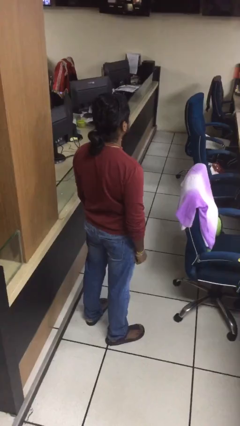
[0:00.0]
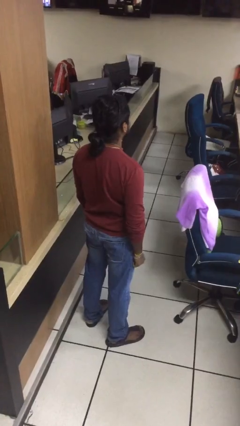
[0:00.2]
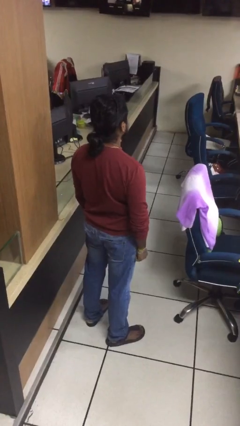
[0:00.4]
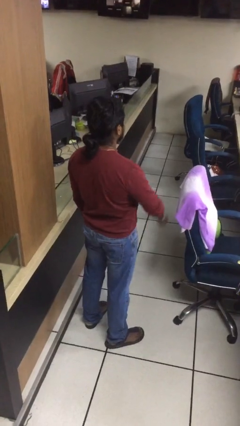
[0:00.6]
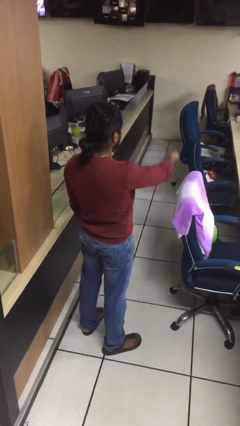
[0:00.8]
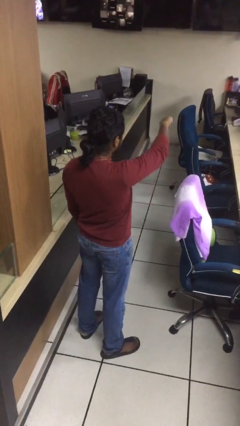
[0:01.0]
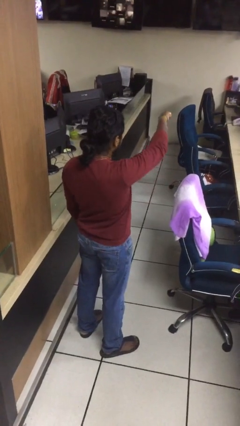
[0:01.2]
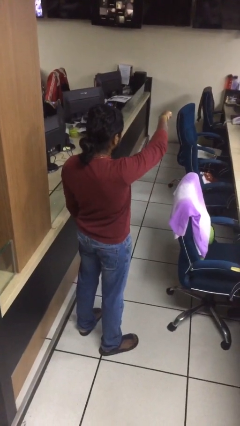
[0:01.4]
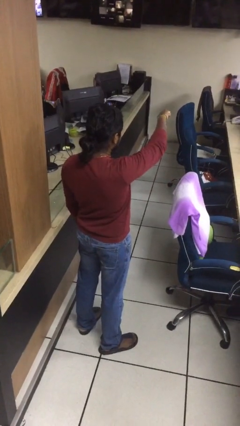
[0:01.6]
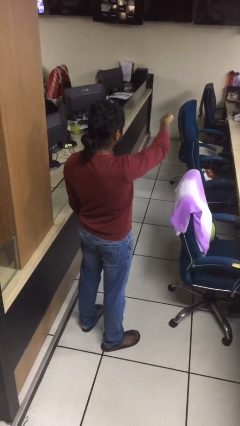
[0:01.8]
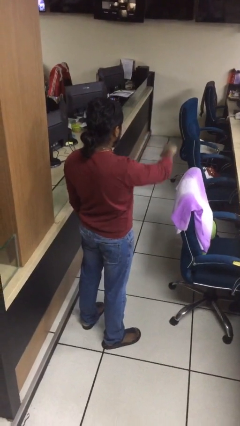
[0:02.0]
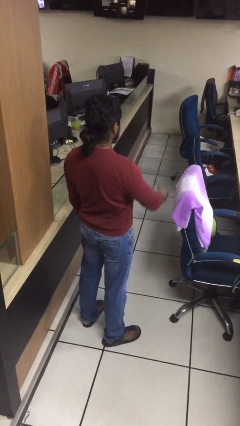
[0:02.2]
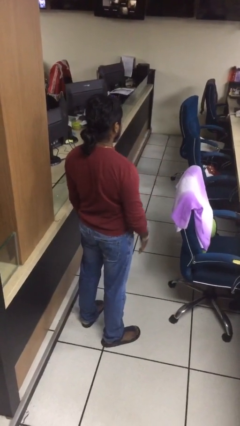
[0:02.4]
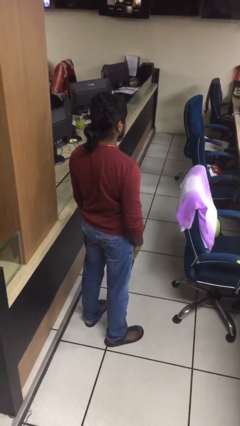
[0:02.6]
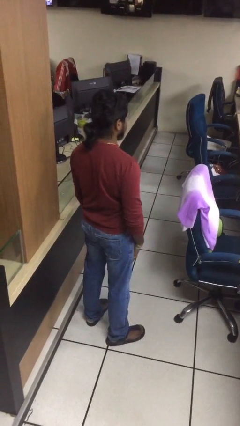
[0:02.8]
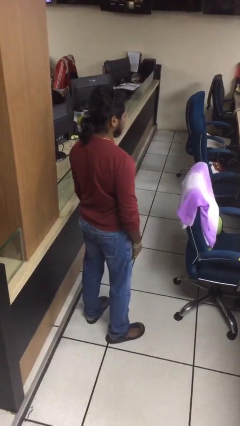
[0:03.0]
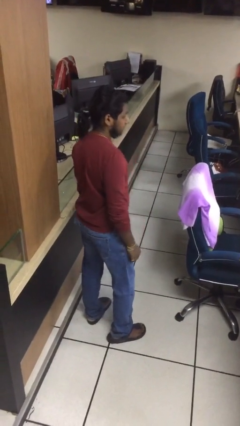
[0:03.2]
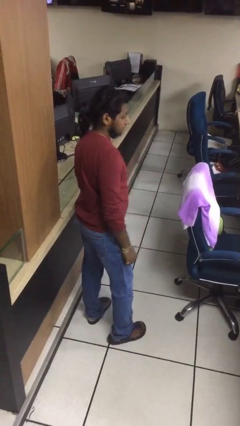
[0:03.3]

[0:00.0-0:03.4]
person gestures thumbs down

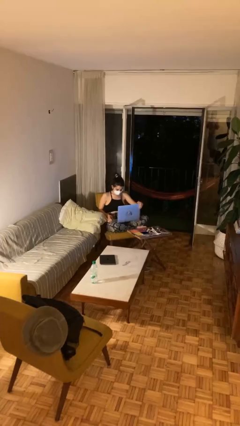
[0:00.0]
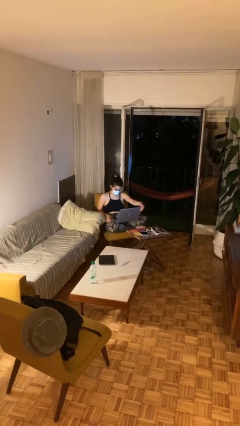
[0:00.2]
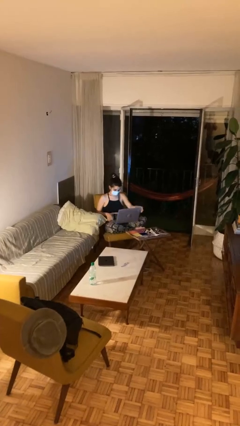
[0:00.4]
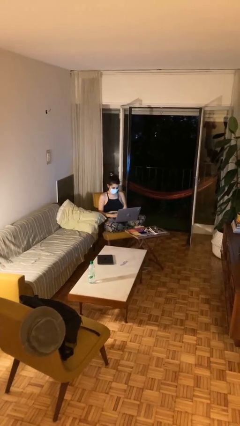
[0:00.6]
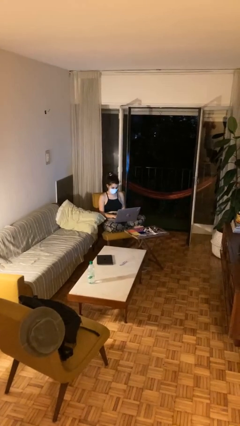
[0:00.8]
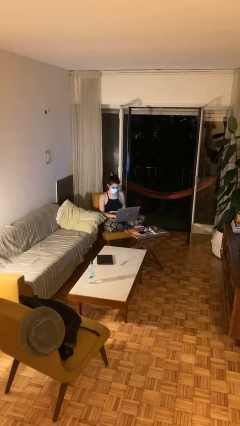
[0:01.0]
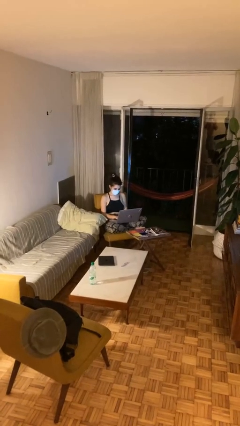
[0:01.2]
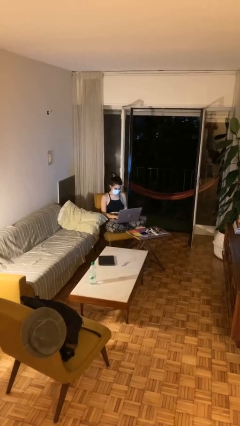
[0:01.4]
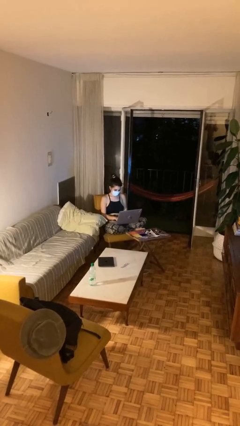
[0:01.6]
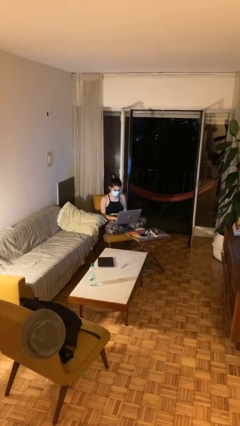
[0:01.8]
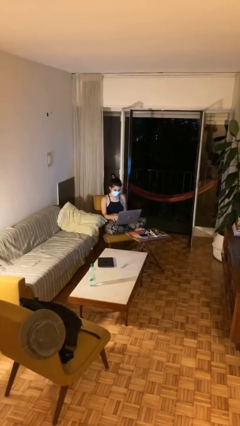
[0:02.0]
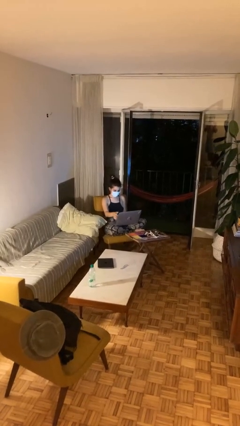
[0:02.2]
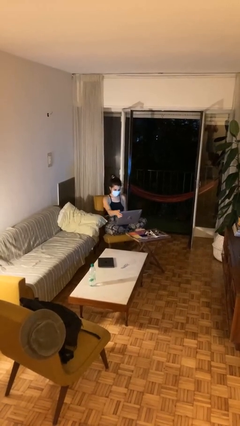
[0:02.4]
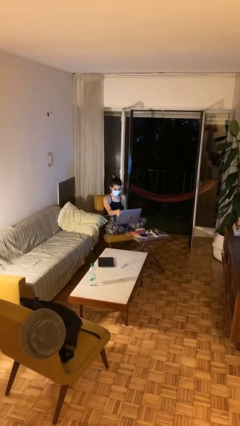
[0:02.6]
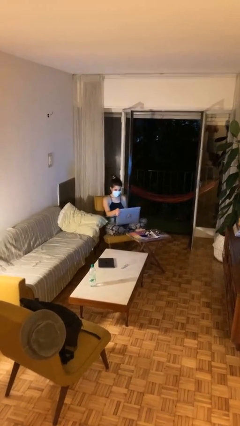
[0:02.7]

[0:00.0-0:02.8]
person interacts with laptop

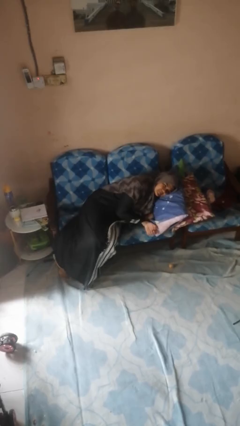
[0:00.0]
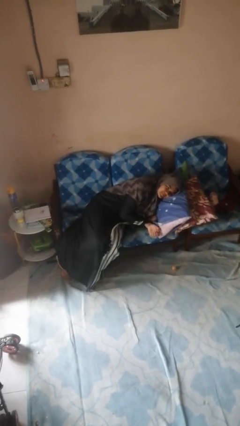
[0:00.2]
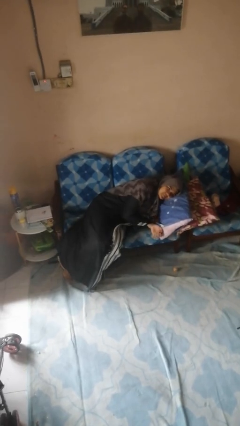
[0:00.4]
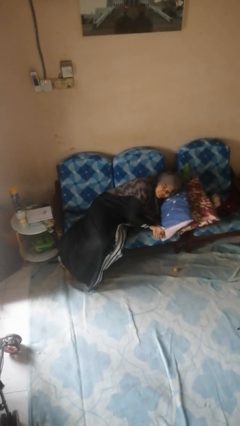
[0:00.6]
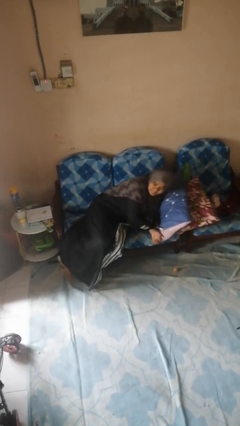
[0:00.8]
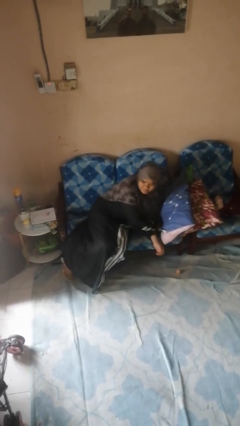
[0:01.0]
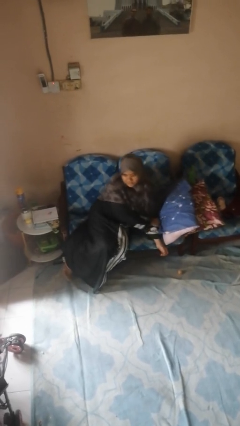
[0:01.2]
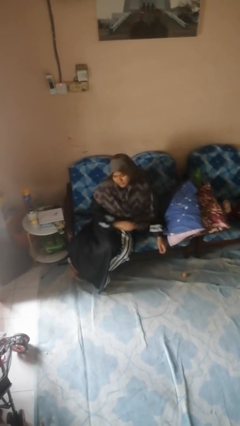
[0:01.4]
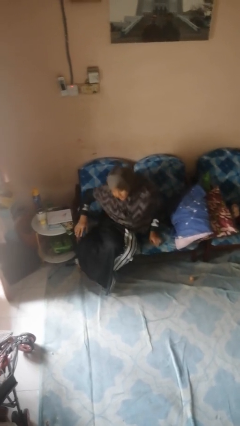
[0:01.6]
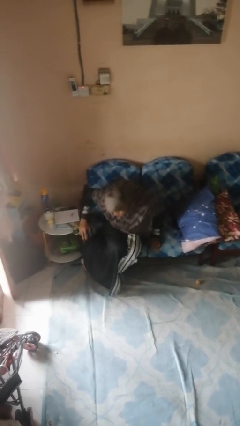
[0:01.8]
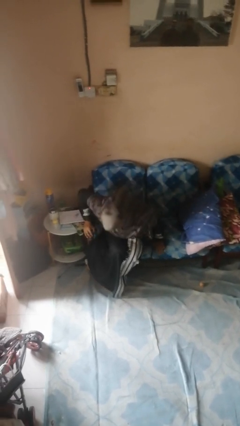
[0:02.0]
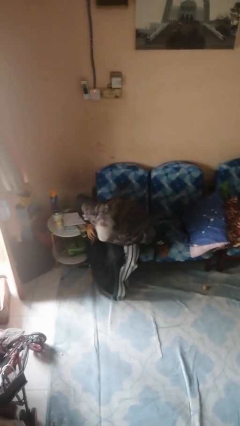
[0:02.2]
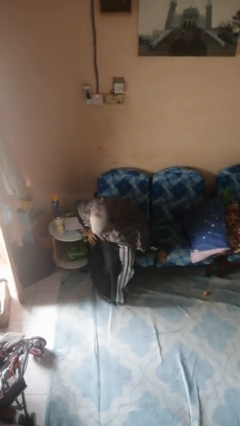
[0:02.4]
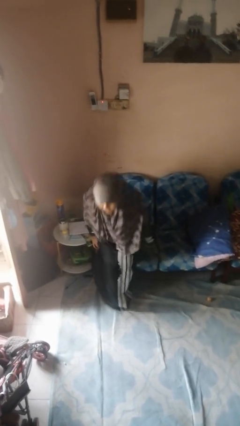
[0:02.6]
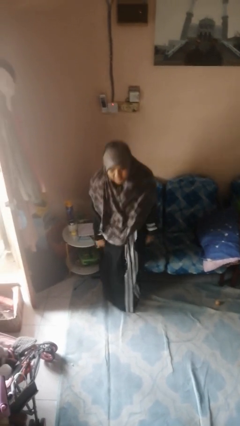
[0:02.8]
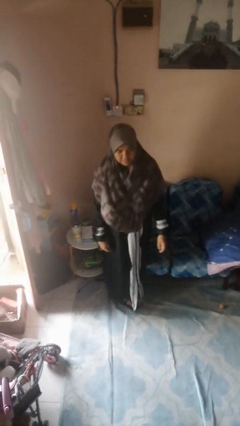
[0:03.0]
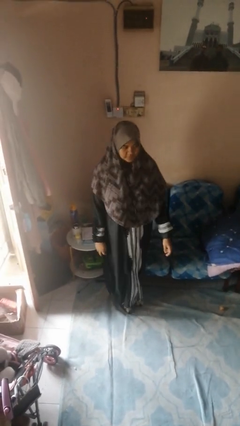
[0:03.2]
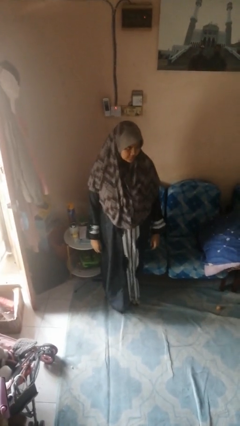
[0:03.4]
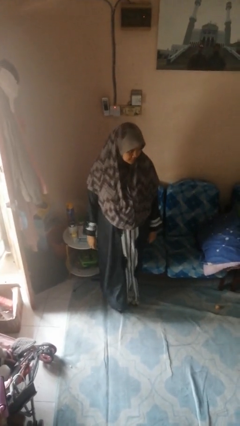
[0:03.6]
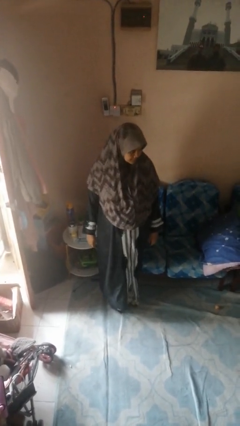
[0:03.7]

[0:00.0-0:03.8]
person stands up

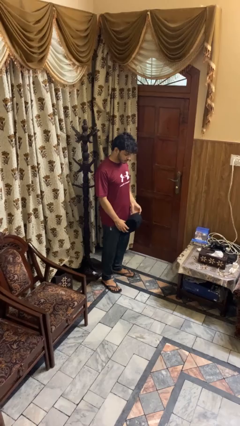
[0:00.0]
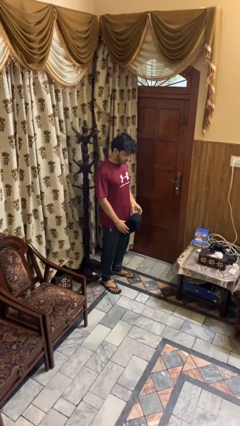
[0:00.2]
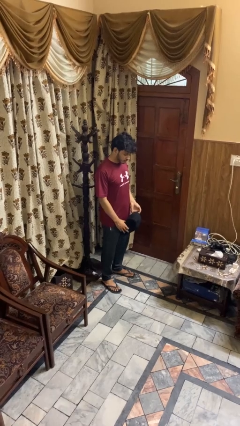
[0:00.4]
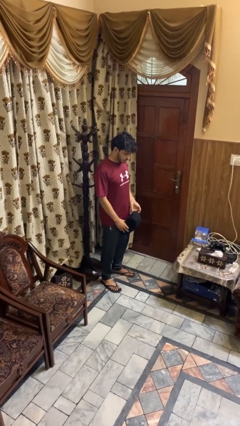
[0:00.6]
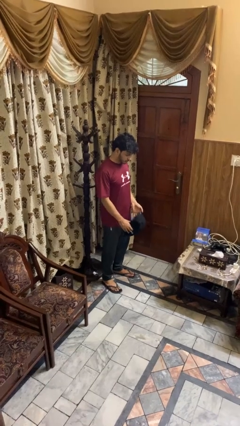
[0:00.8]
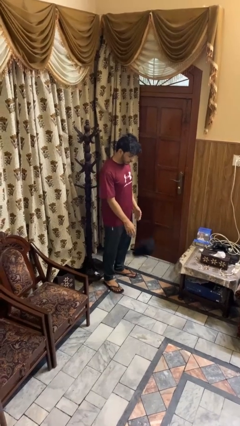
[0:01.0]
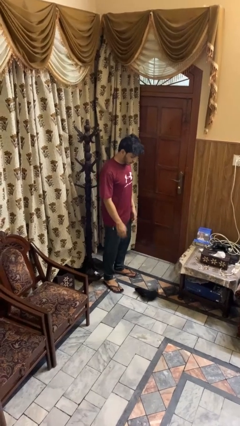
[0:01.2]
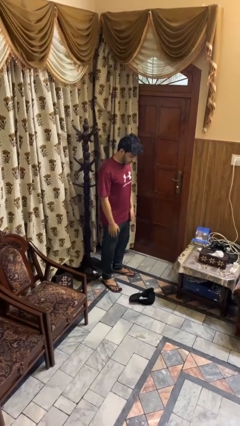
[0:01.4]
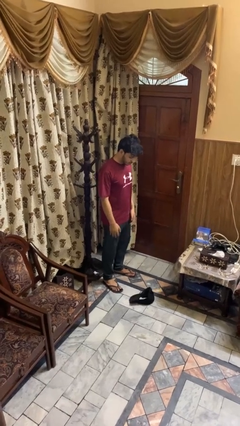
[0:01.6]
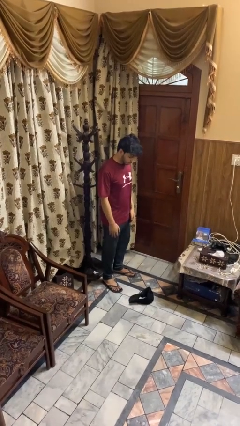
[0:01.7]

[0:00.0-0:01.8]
person drops object

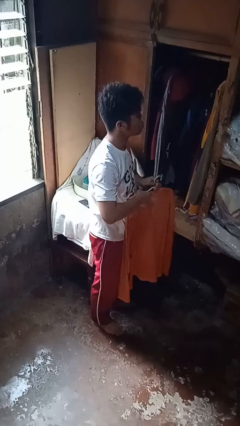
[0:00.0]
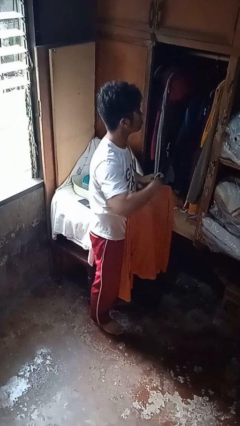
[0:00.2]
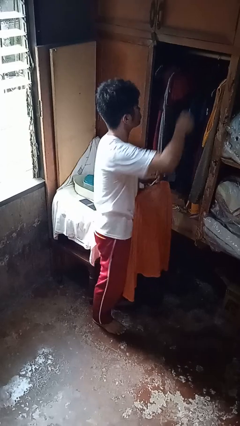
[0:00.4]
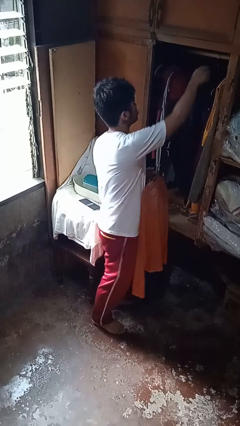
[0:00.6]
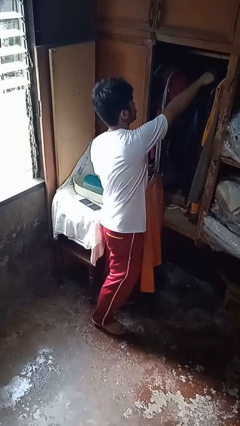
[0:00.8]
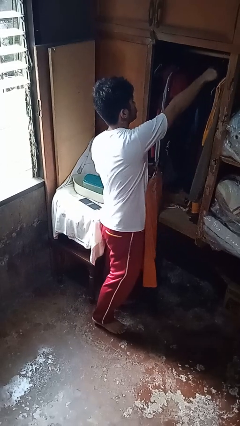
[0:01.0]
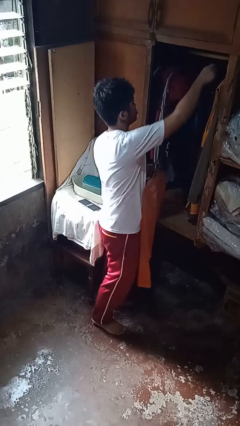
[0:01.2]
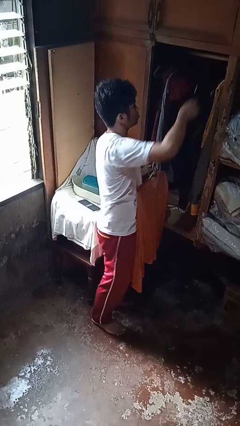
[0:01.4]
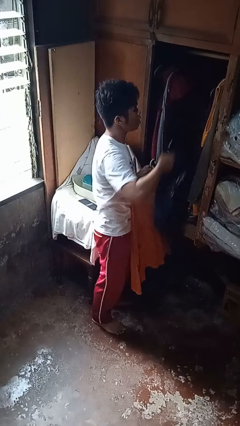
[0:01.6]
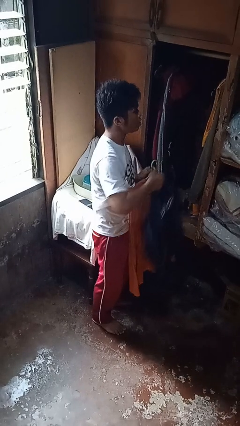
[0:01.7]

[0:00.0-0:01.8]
person takes clothes from closet

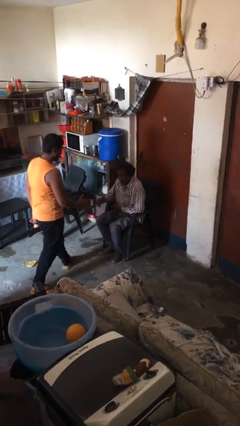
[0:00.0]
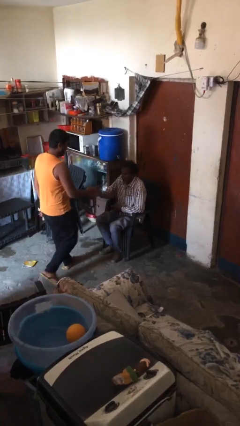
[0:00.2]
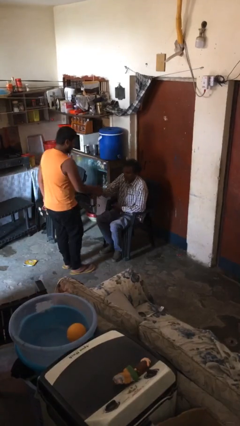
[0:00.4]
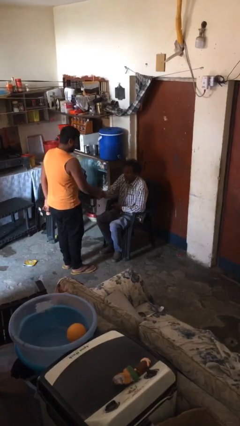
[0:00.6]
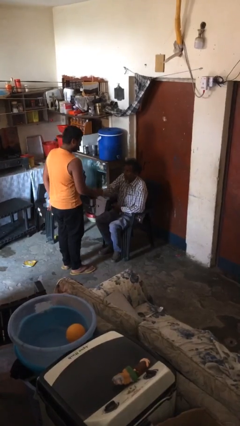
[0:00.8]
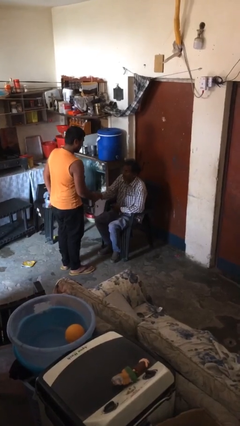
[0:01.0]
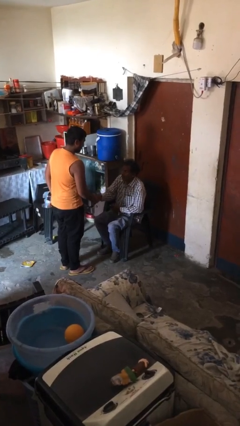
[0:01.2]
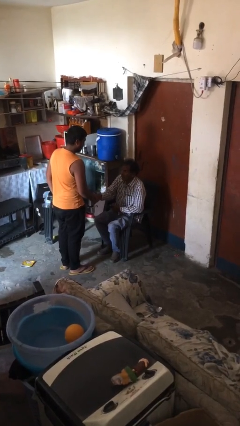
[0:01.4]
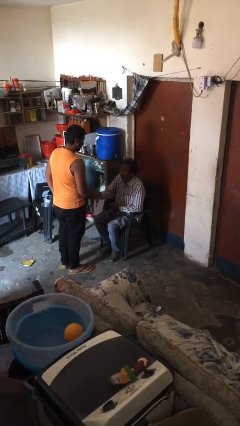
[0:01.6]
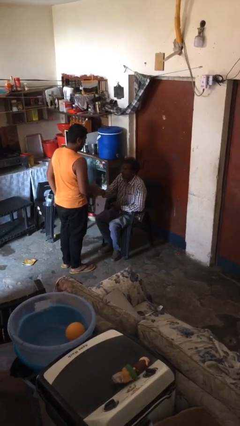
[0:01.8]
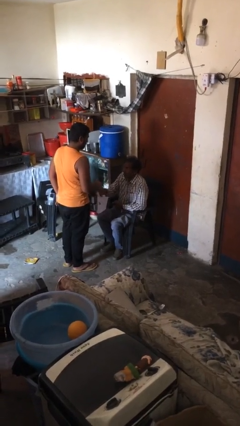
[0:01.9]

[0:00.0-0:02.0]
person shakes hand

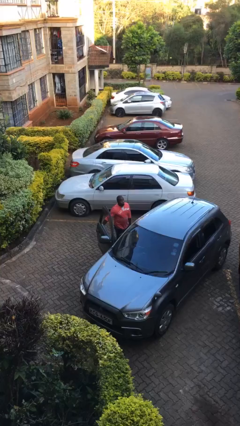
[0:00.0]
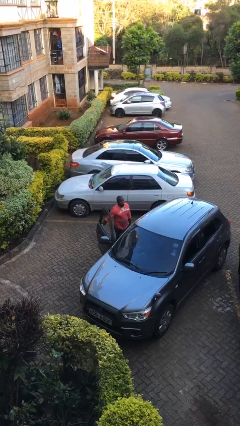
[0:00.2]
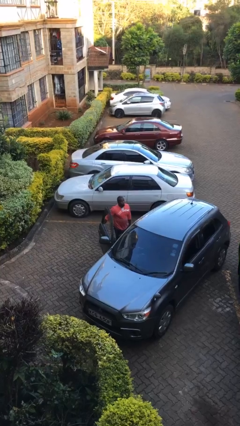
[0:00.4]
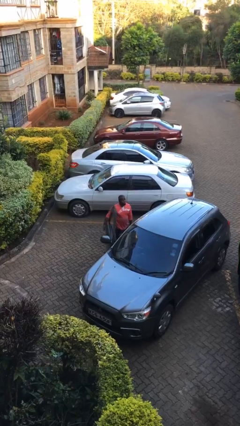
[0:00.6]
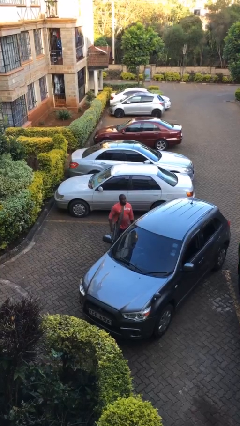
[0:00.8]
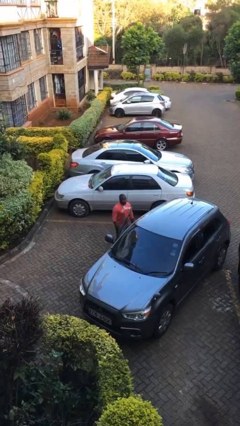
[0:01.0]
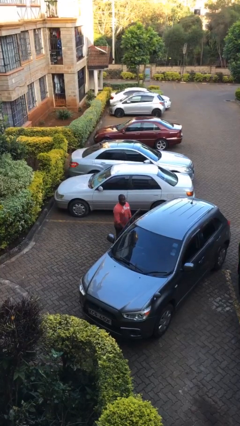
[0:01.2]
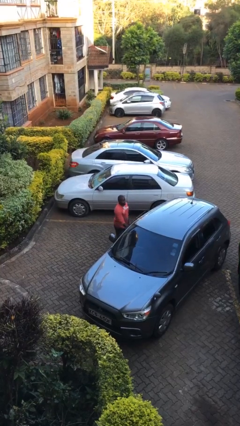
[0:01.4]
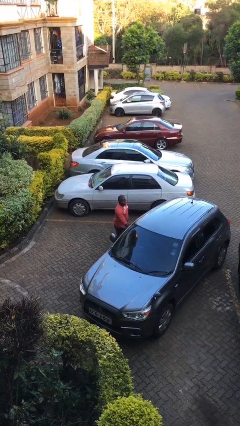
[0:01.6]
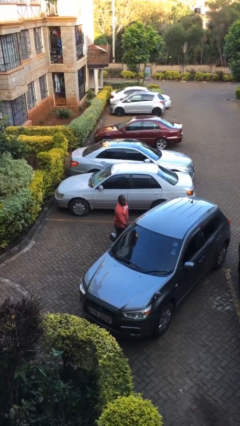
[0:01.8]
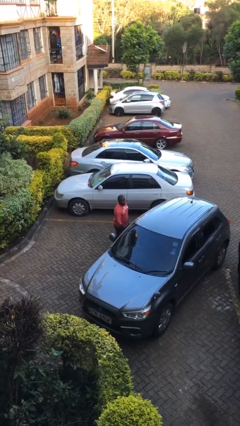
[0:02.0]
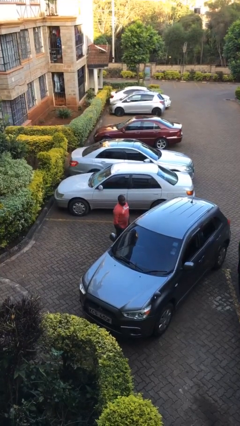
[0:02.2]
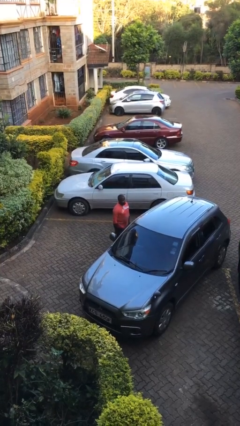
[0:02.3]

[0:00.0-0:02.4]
person closes car door
